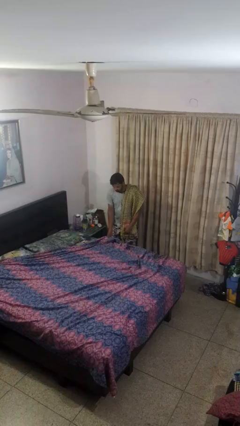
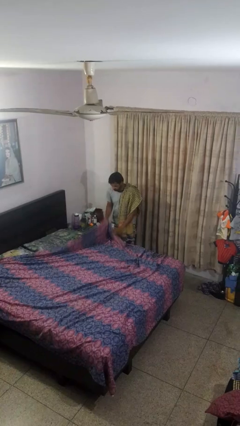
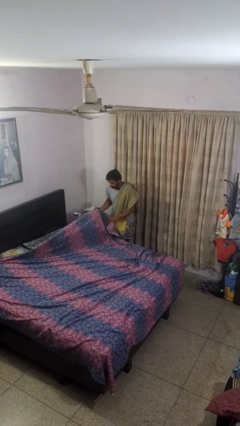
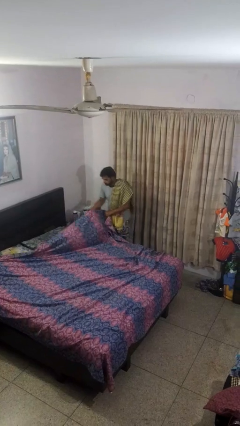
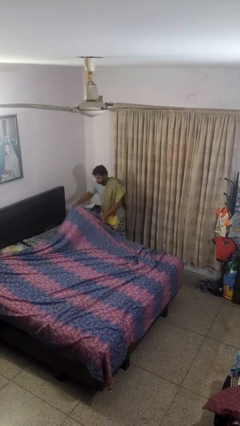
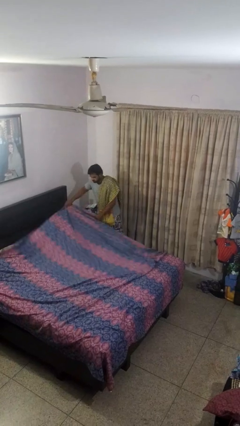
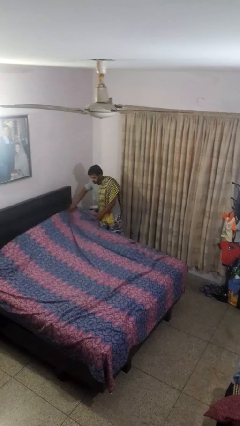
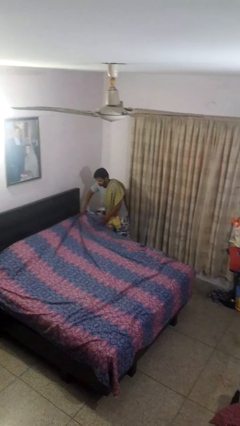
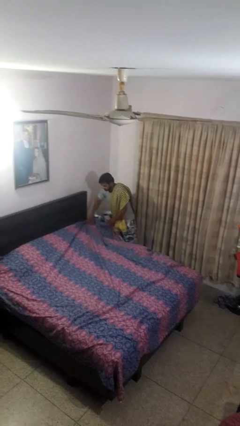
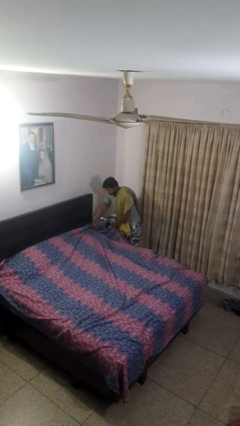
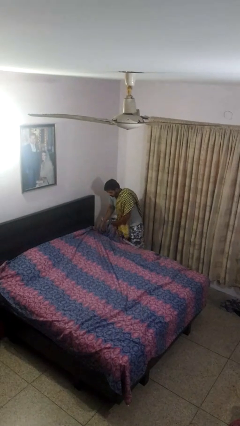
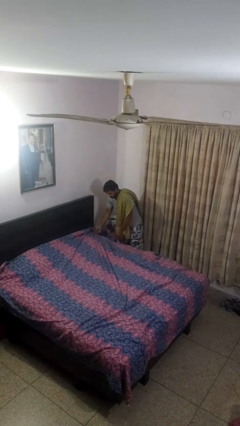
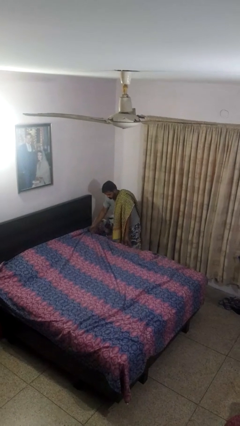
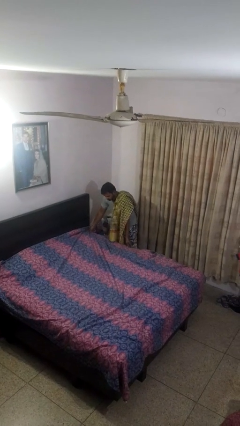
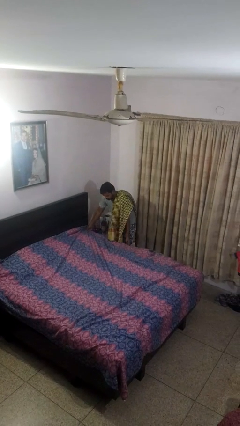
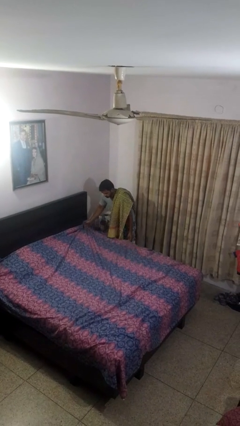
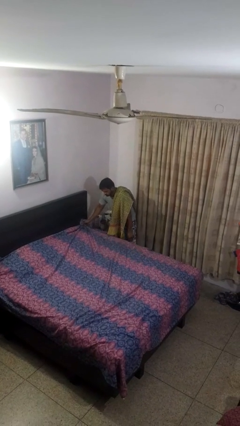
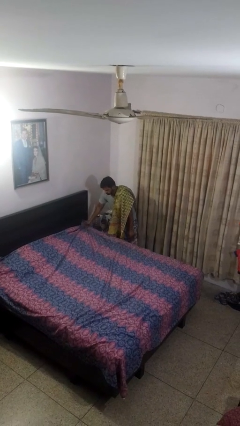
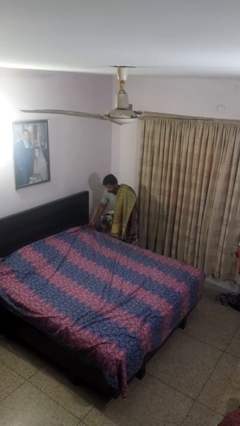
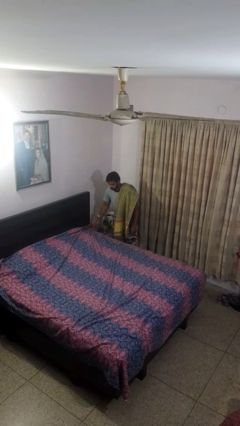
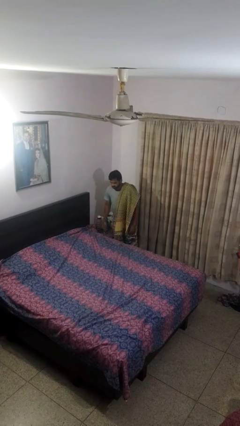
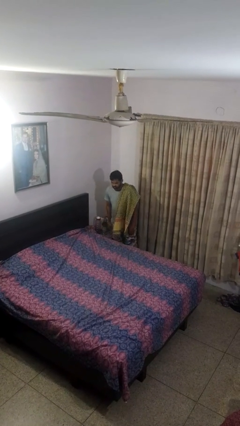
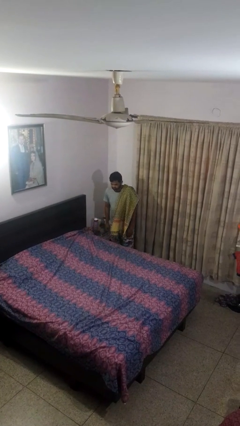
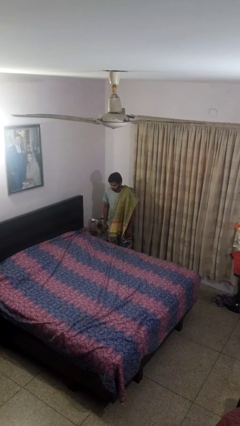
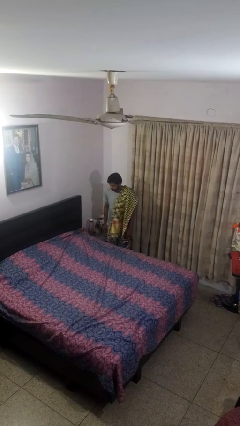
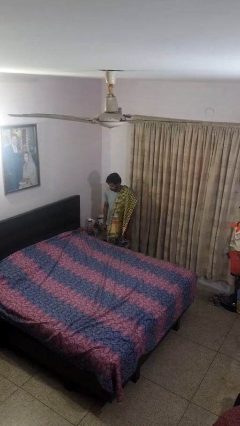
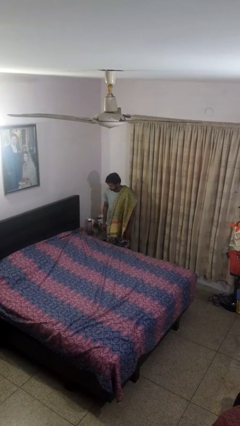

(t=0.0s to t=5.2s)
person makes bed

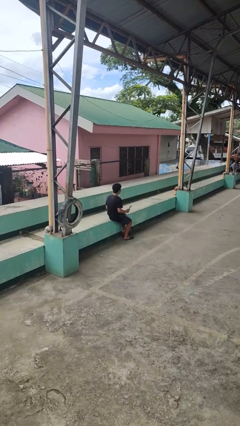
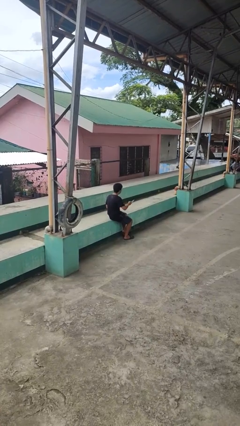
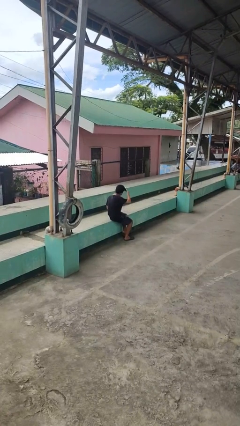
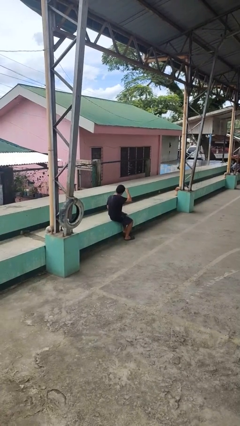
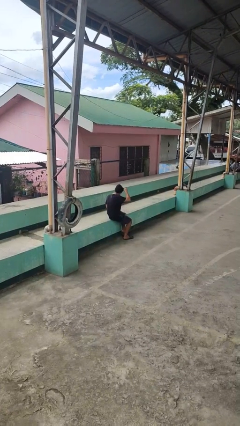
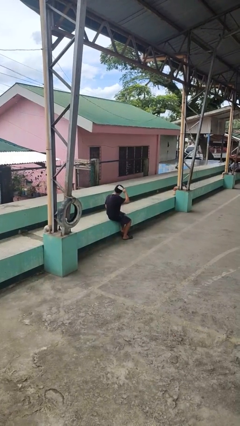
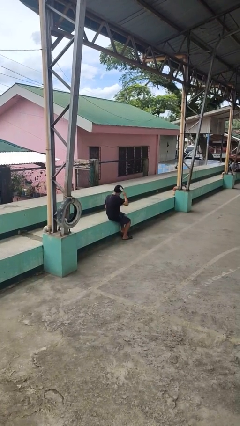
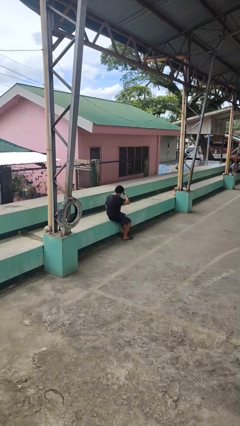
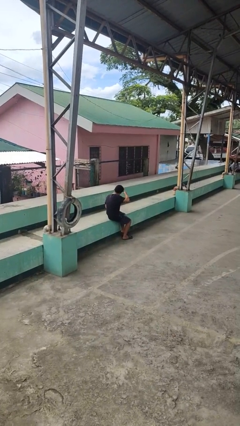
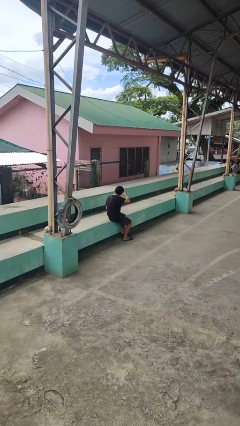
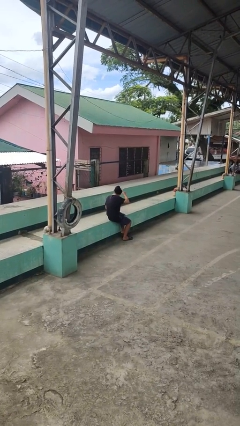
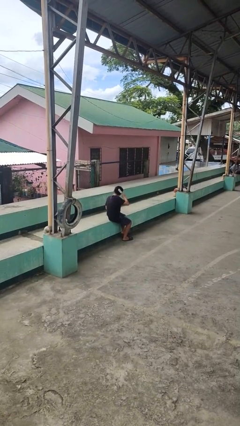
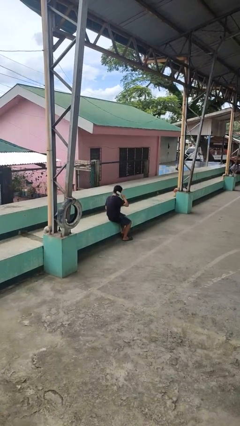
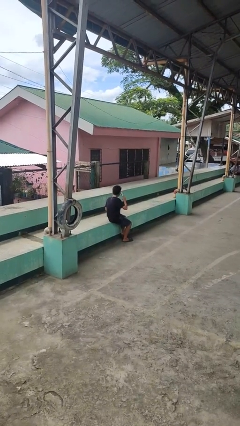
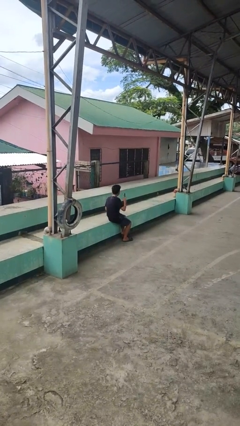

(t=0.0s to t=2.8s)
person brushes hair

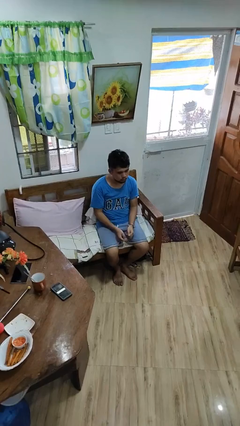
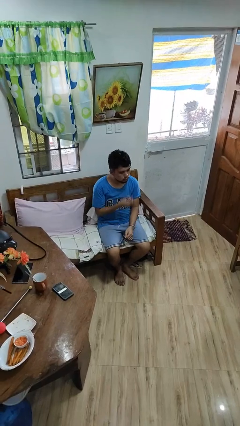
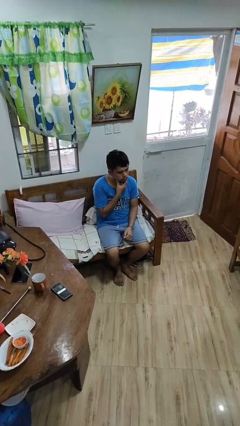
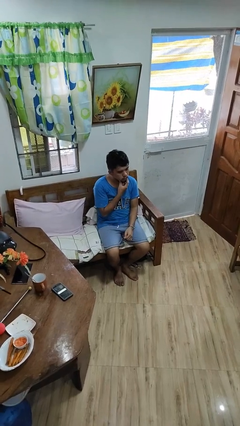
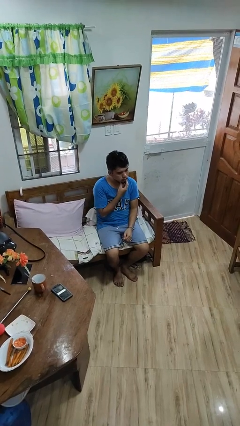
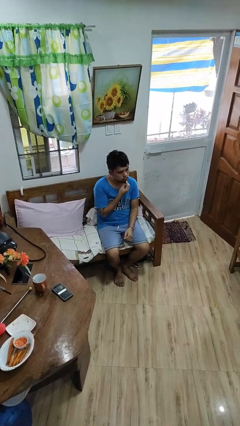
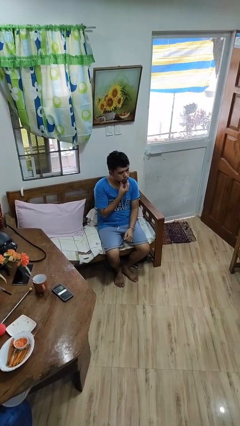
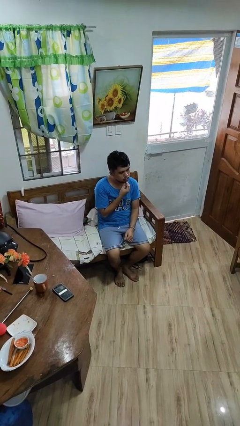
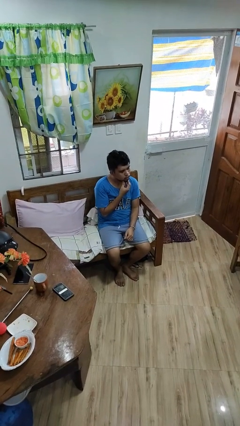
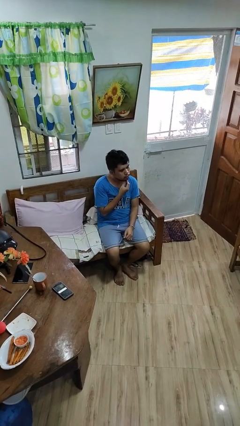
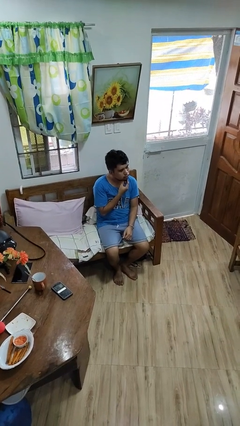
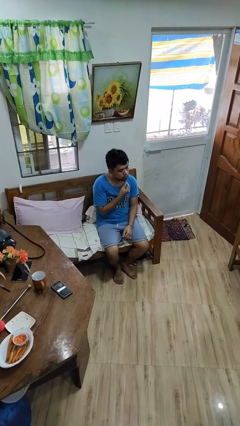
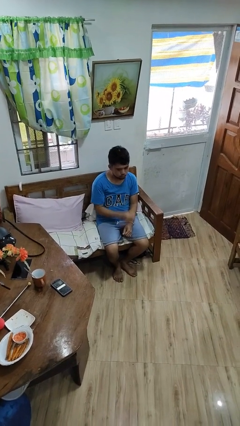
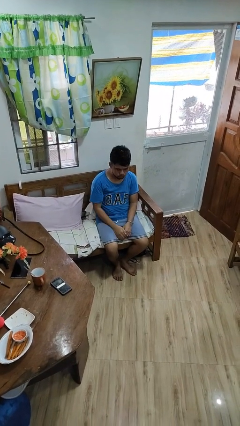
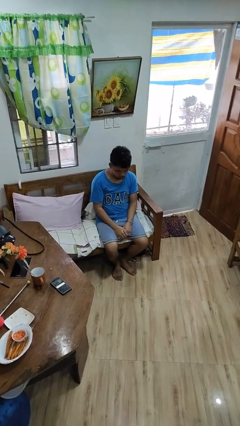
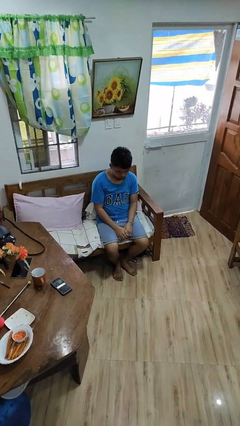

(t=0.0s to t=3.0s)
person strokes chin

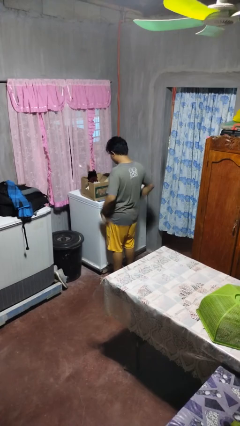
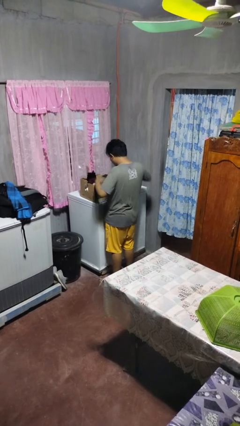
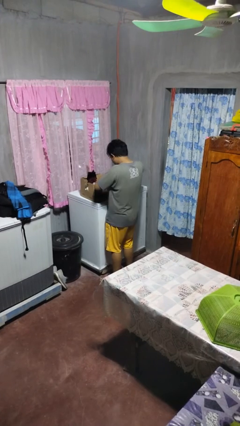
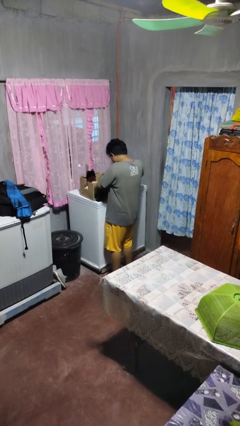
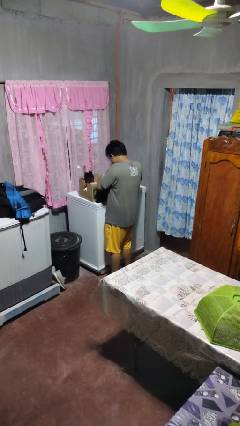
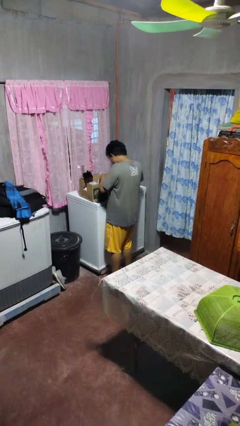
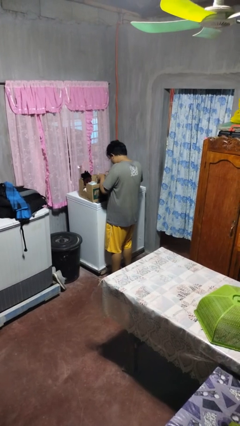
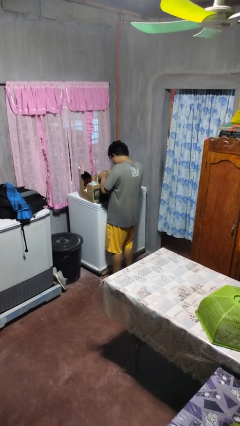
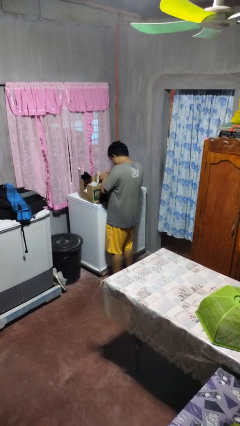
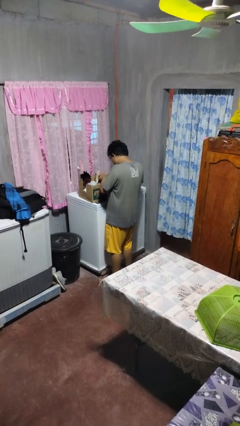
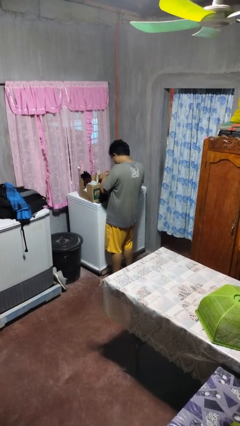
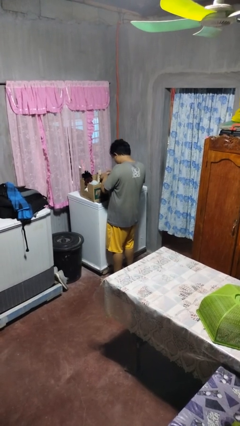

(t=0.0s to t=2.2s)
person searches in box

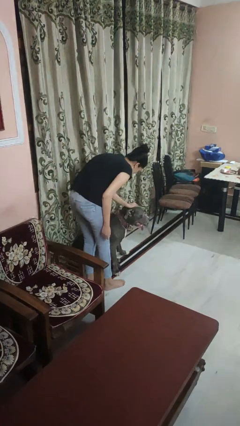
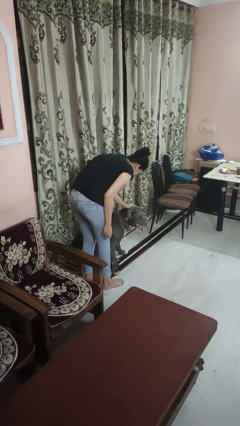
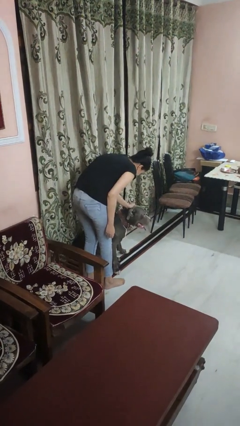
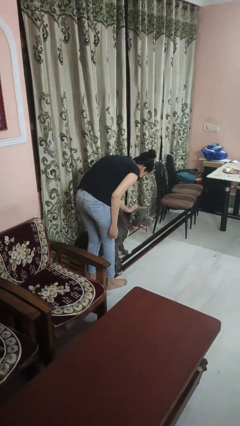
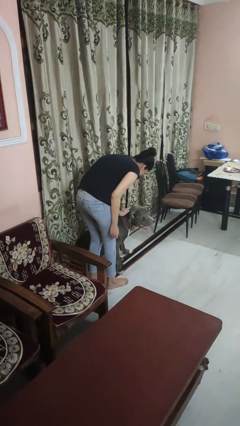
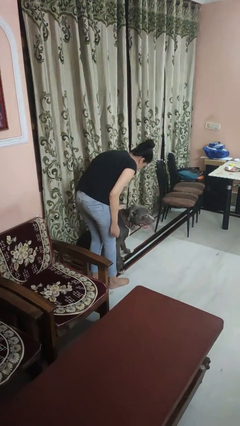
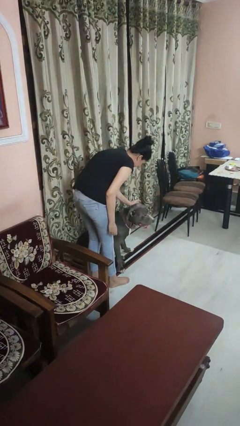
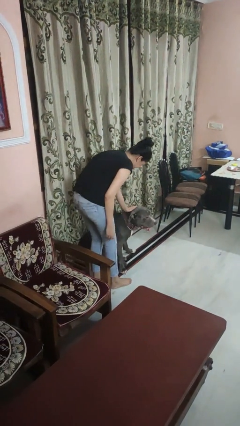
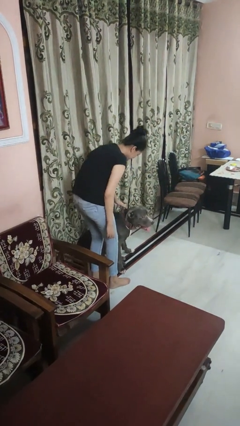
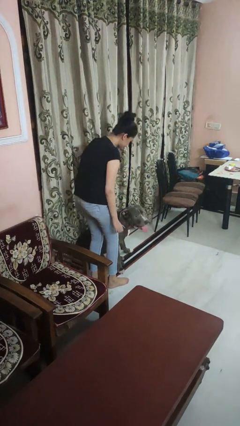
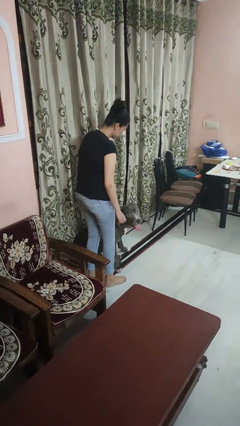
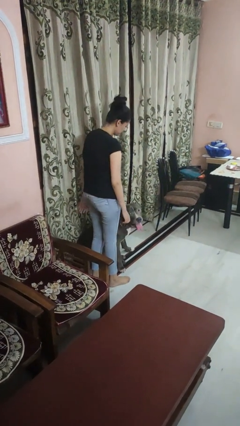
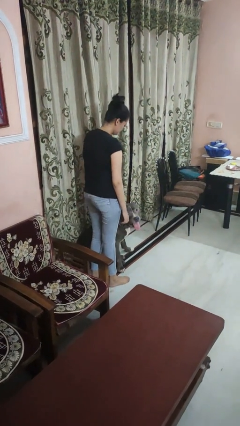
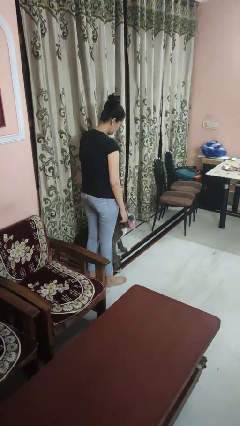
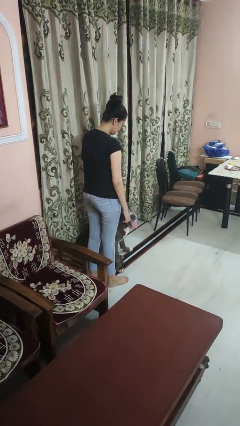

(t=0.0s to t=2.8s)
person pets dog

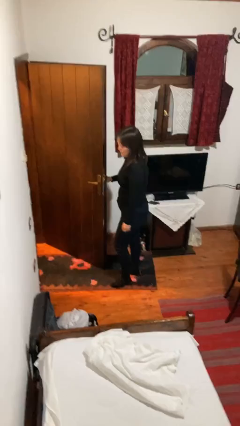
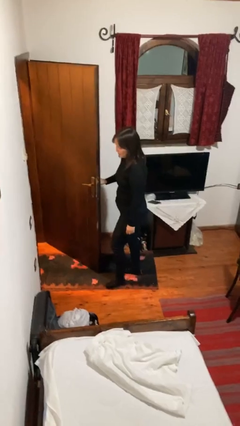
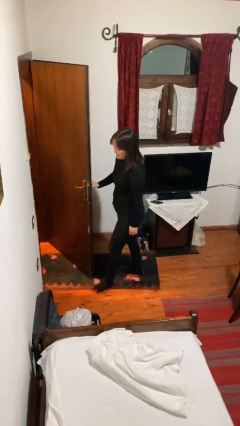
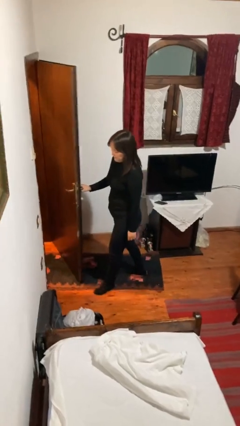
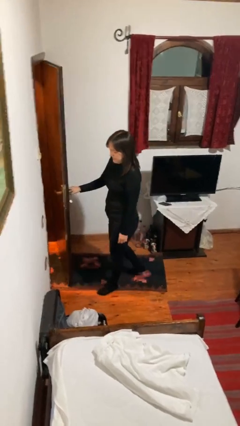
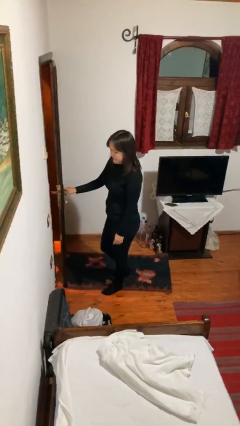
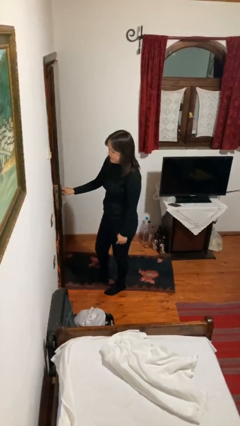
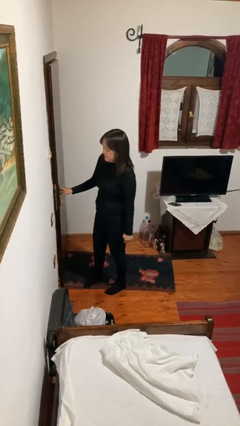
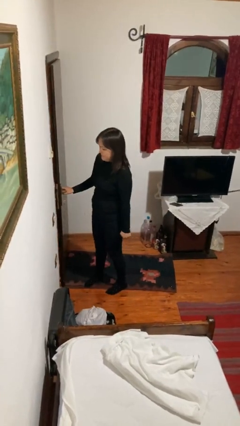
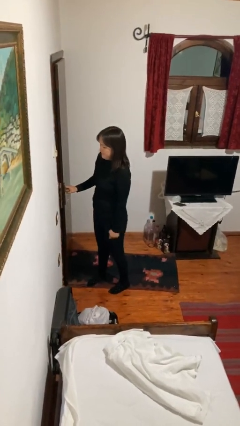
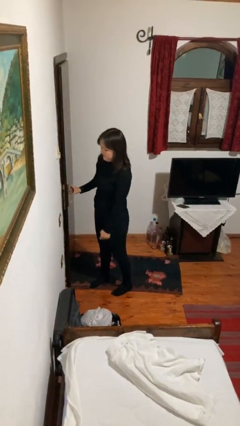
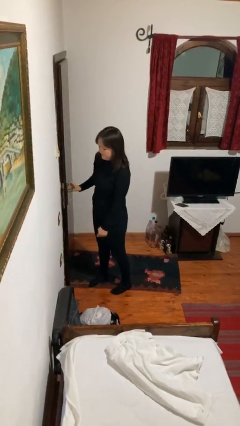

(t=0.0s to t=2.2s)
person closes facility door
